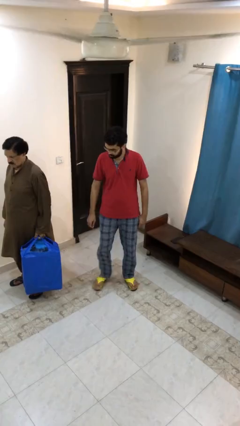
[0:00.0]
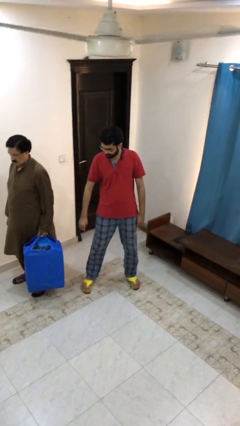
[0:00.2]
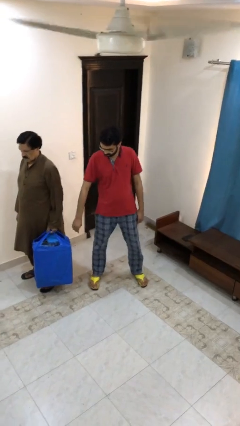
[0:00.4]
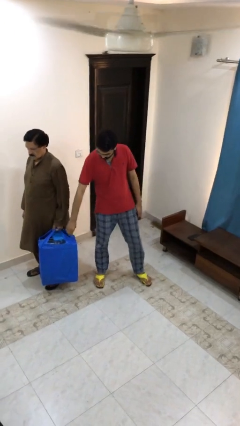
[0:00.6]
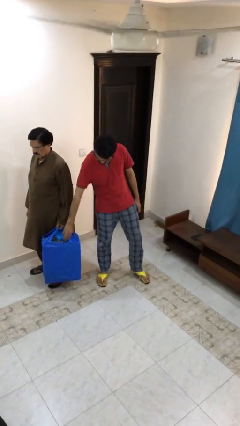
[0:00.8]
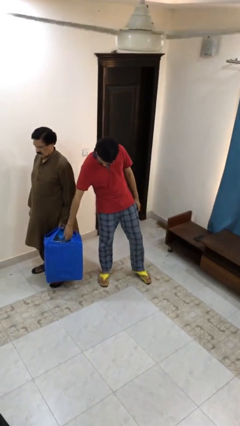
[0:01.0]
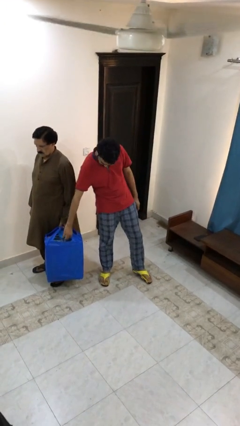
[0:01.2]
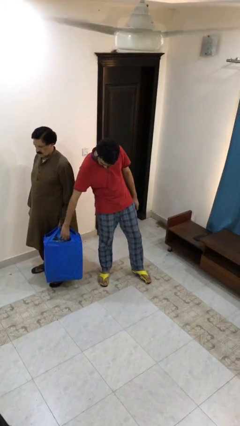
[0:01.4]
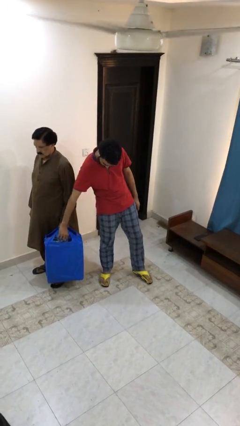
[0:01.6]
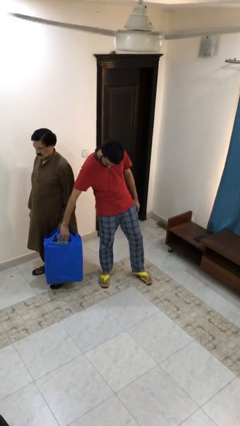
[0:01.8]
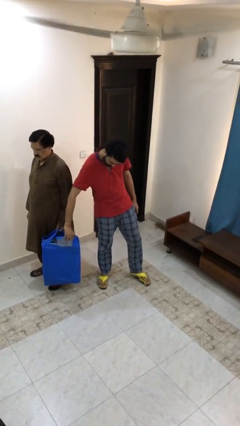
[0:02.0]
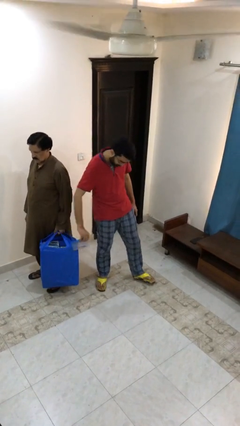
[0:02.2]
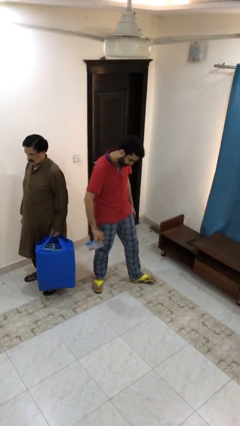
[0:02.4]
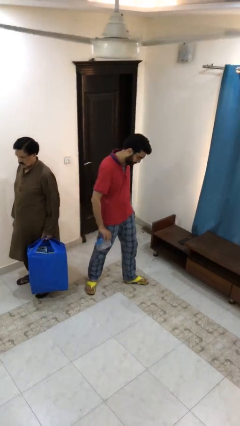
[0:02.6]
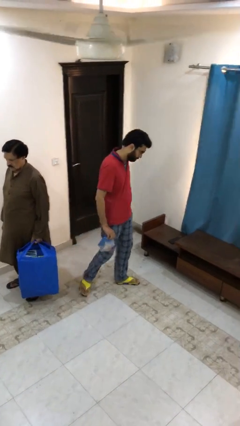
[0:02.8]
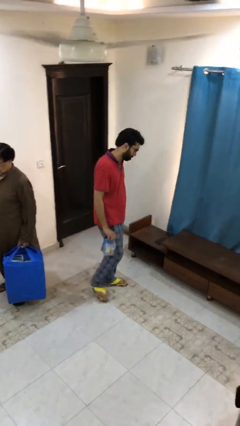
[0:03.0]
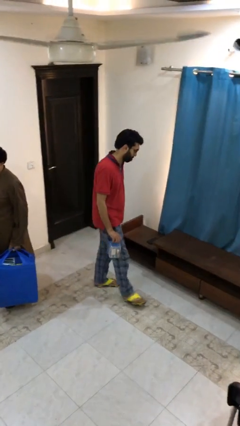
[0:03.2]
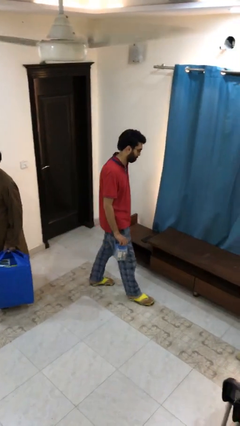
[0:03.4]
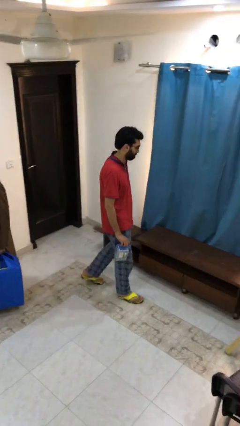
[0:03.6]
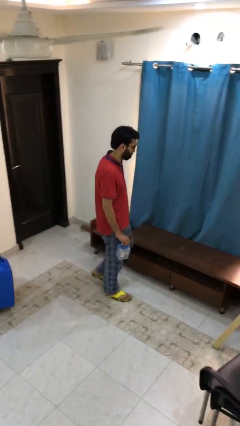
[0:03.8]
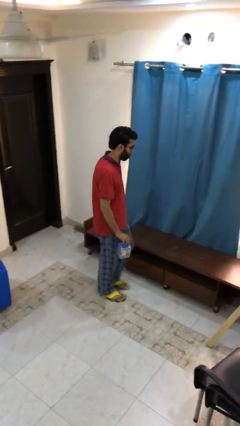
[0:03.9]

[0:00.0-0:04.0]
person steals object from person

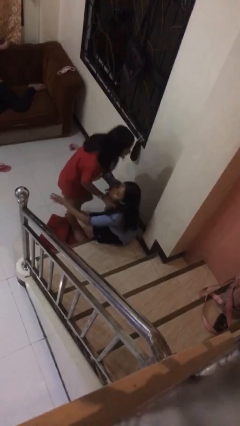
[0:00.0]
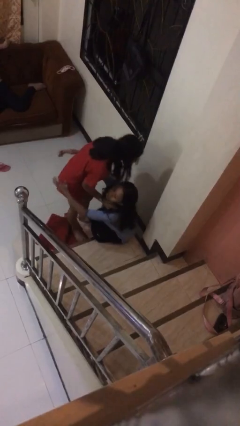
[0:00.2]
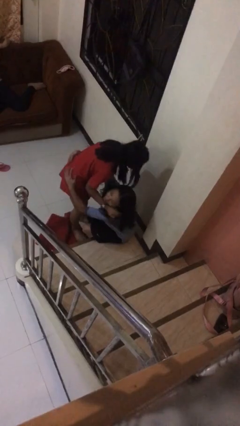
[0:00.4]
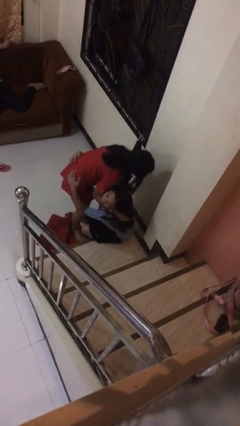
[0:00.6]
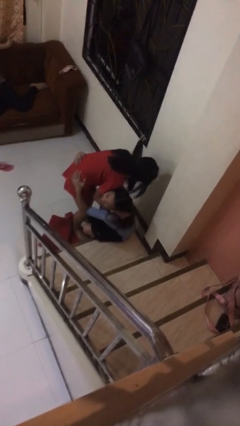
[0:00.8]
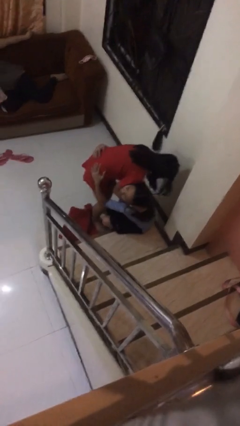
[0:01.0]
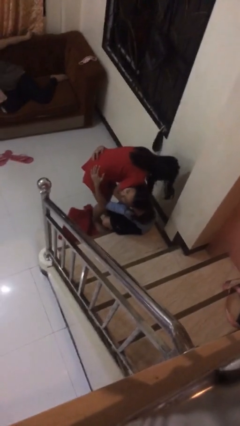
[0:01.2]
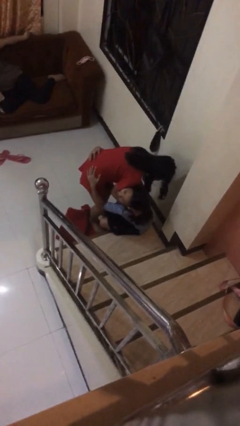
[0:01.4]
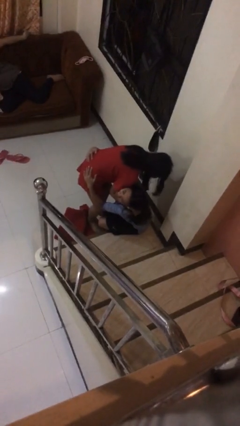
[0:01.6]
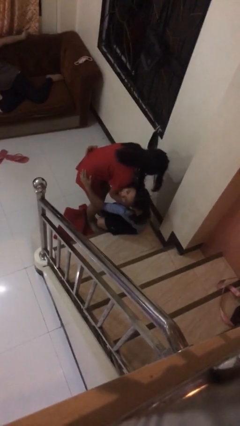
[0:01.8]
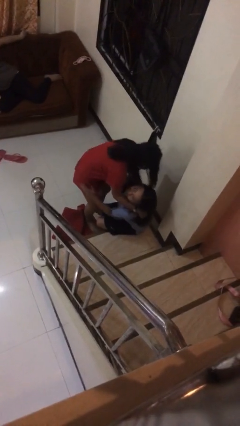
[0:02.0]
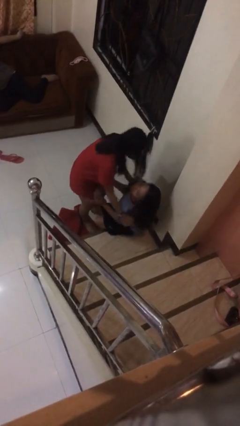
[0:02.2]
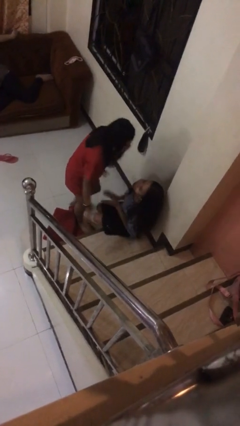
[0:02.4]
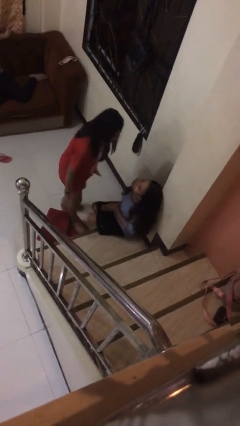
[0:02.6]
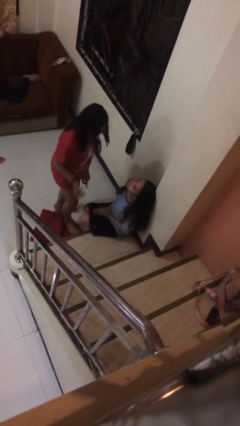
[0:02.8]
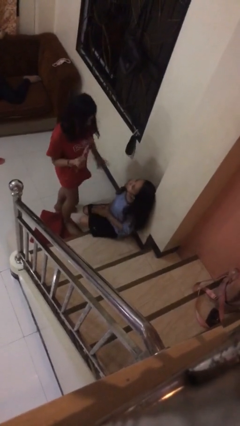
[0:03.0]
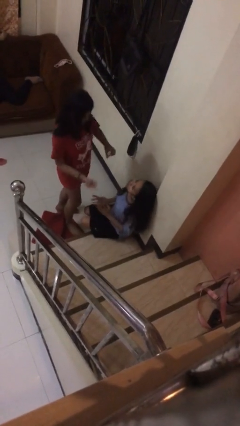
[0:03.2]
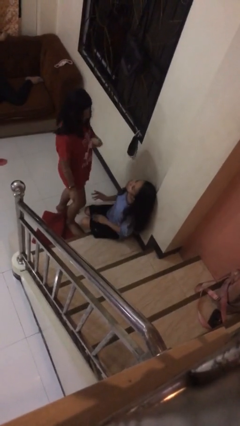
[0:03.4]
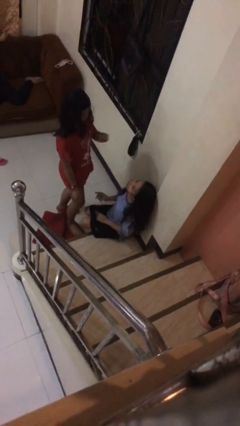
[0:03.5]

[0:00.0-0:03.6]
person embraces person

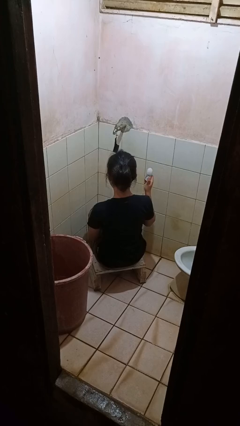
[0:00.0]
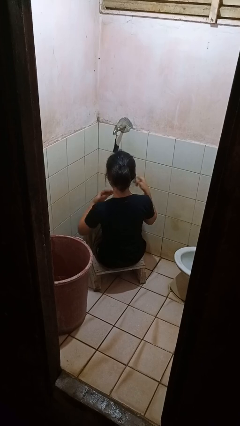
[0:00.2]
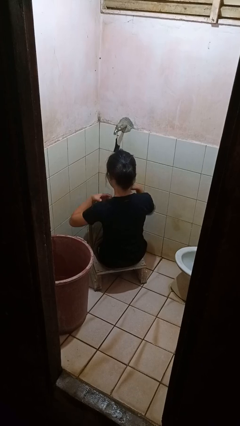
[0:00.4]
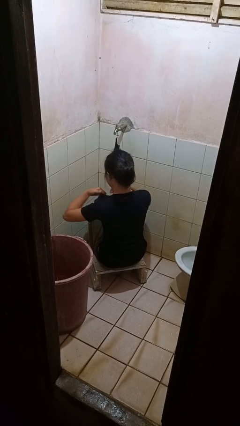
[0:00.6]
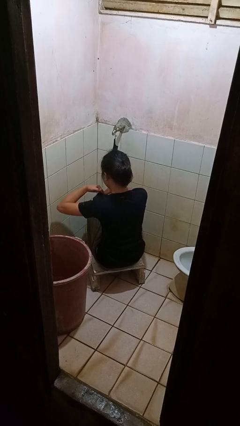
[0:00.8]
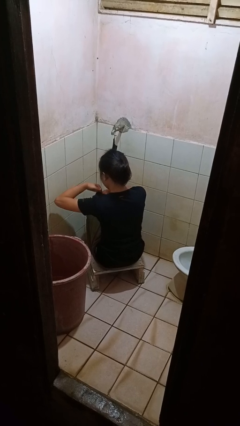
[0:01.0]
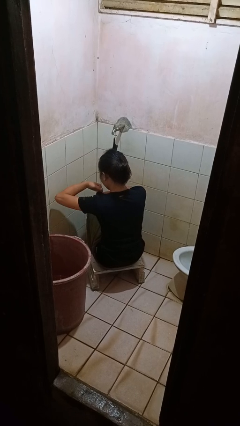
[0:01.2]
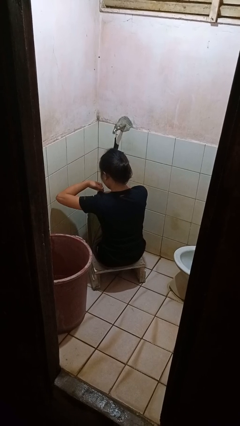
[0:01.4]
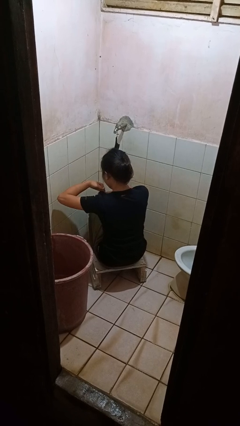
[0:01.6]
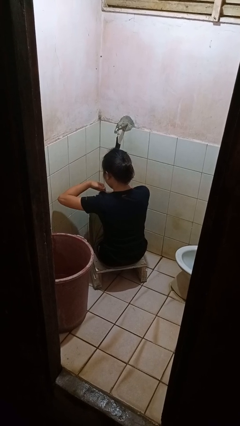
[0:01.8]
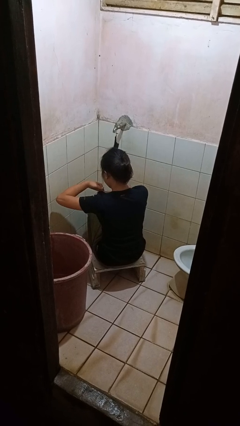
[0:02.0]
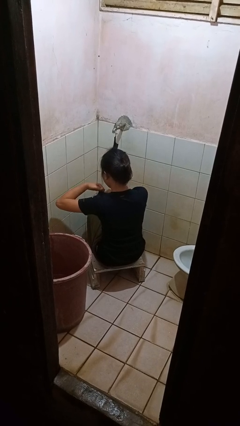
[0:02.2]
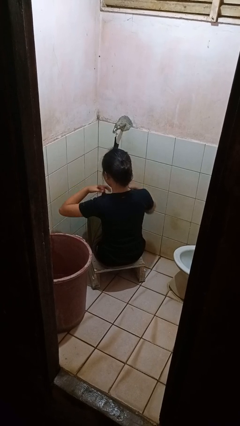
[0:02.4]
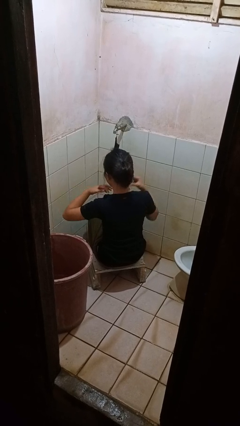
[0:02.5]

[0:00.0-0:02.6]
person applies deodorant

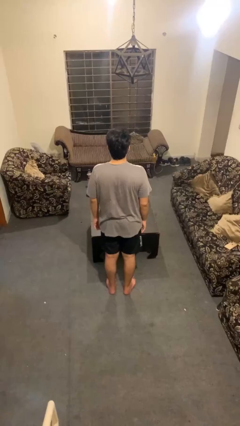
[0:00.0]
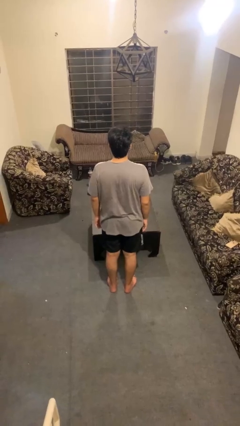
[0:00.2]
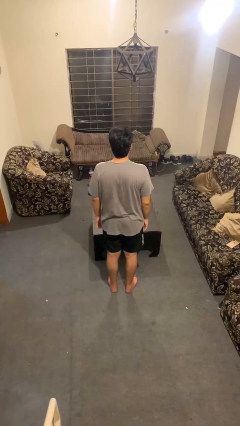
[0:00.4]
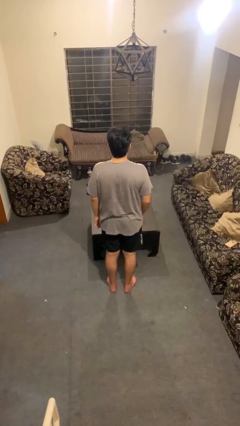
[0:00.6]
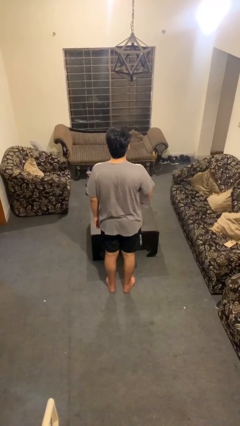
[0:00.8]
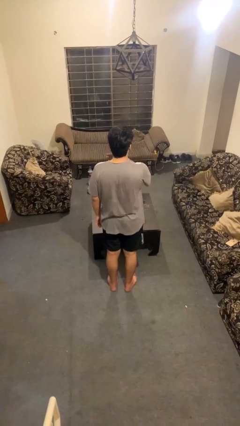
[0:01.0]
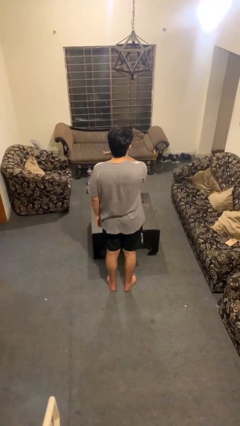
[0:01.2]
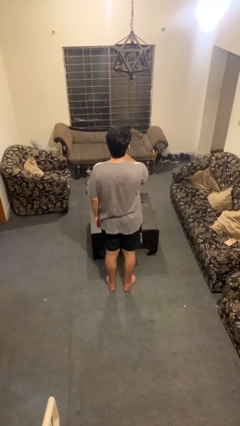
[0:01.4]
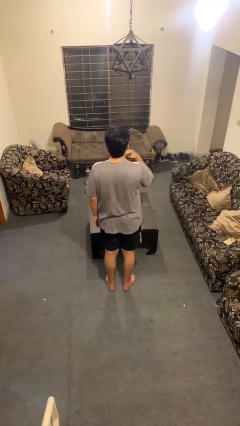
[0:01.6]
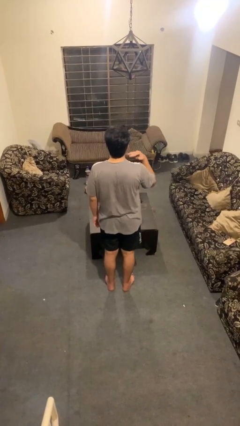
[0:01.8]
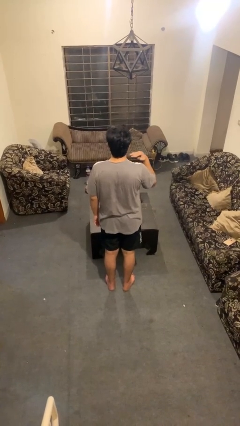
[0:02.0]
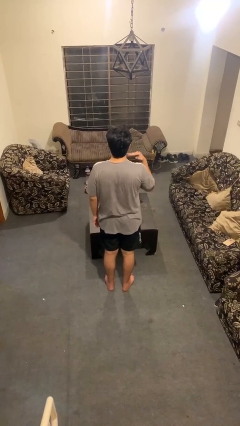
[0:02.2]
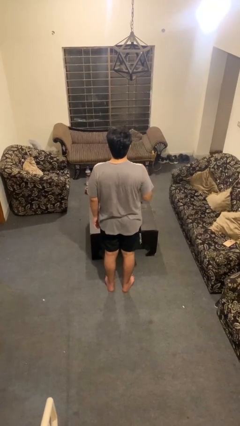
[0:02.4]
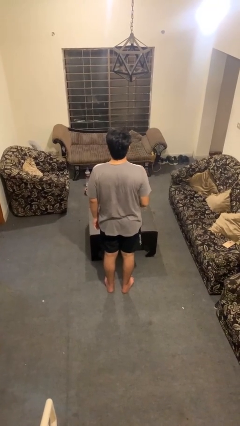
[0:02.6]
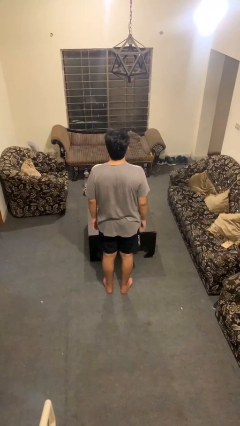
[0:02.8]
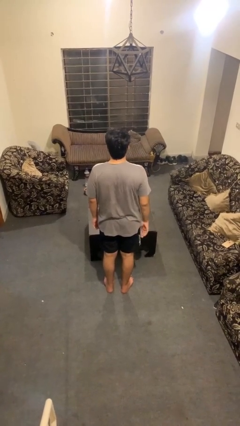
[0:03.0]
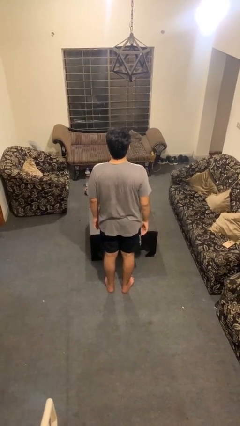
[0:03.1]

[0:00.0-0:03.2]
person gestures cut

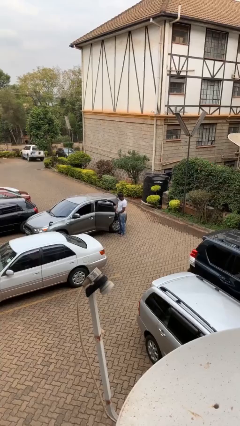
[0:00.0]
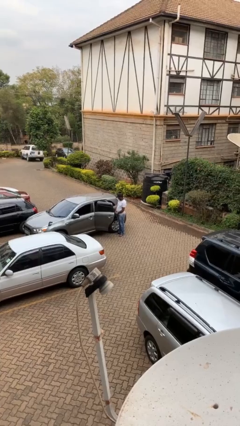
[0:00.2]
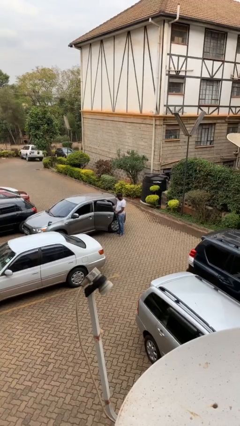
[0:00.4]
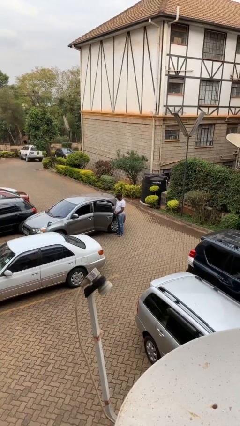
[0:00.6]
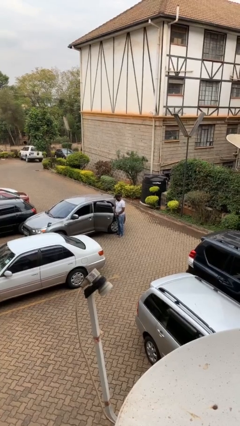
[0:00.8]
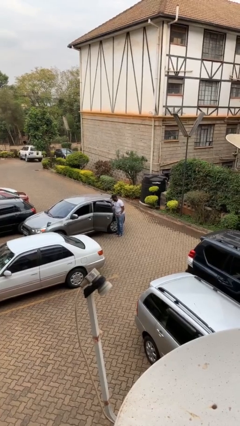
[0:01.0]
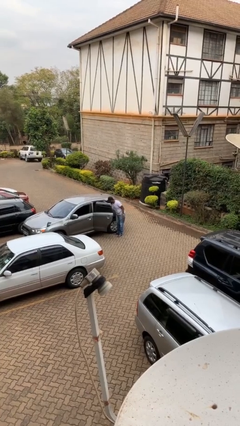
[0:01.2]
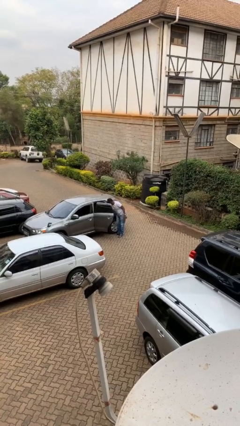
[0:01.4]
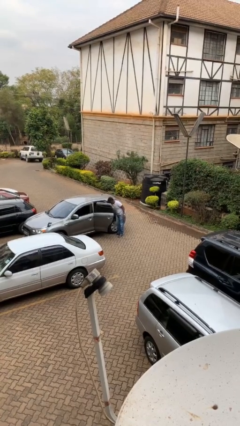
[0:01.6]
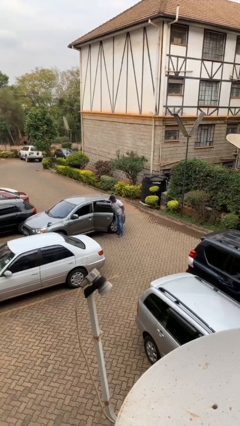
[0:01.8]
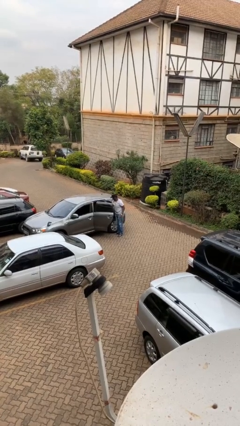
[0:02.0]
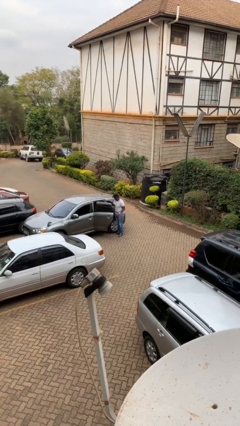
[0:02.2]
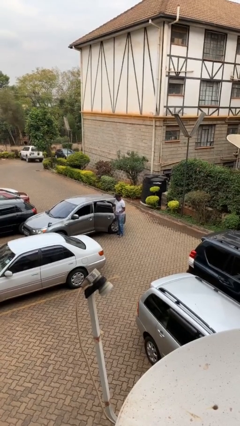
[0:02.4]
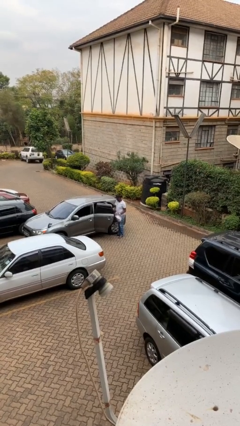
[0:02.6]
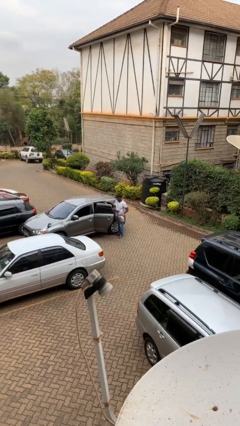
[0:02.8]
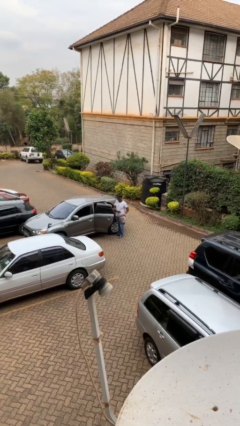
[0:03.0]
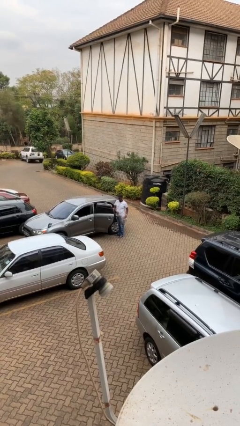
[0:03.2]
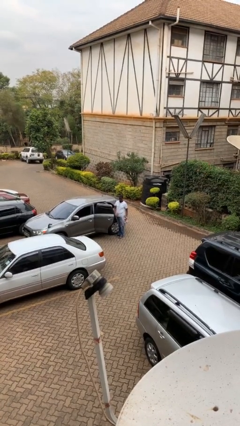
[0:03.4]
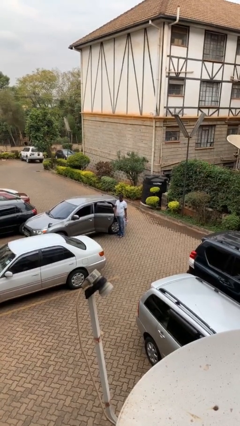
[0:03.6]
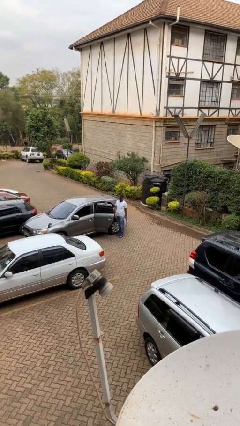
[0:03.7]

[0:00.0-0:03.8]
person unloads car

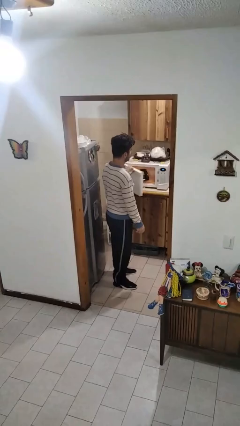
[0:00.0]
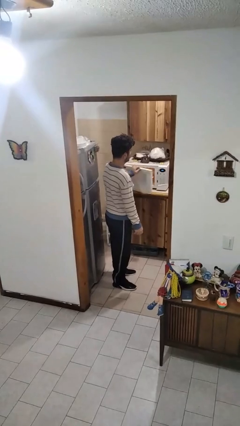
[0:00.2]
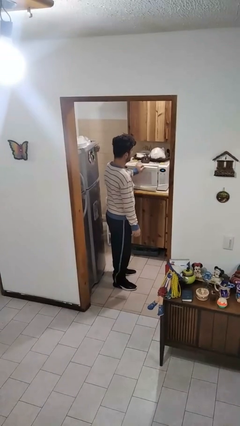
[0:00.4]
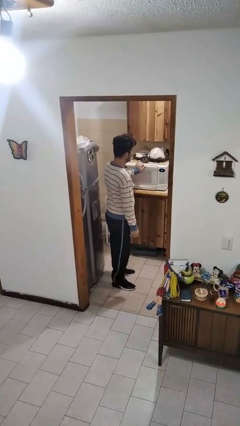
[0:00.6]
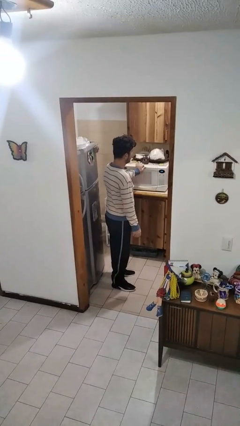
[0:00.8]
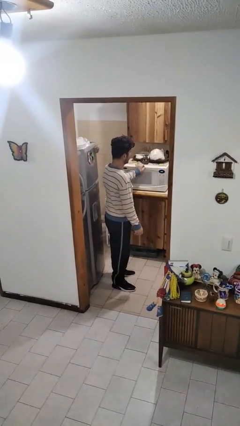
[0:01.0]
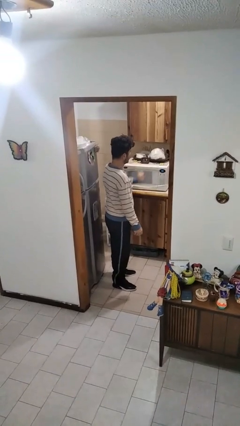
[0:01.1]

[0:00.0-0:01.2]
person closes microwave
